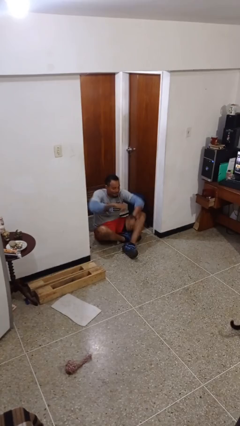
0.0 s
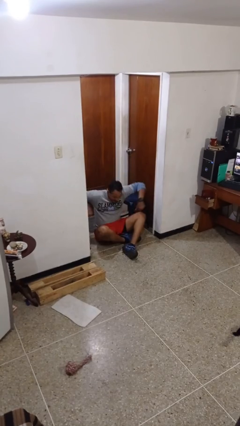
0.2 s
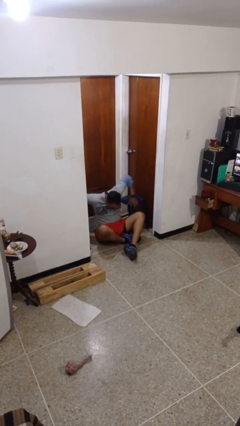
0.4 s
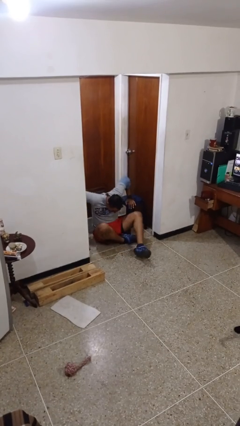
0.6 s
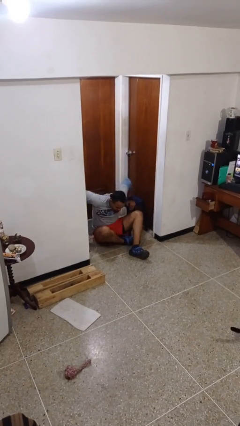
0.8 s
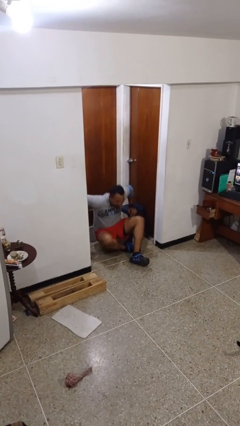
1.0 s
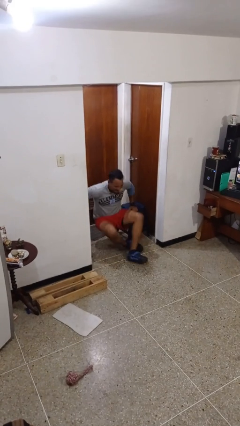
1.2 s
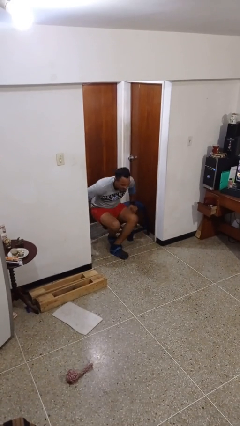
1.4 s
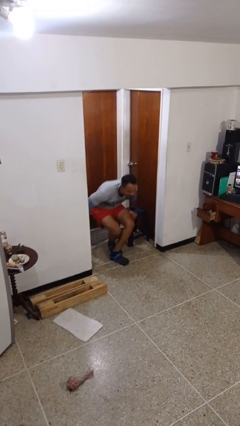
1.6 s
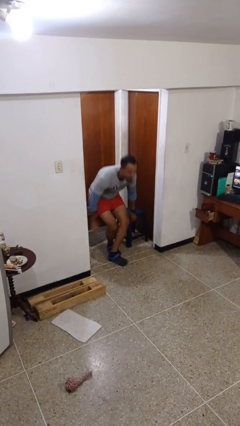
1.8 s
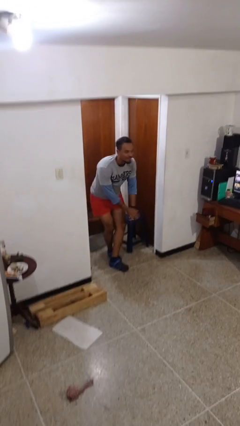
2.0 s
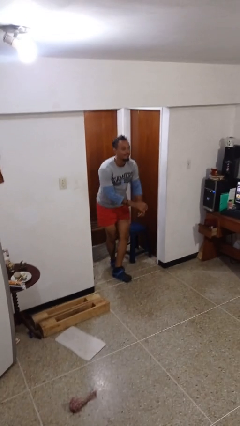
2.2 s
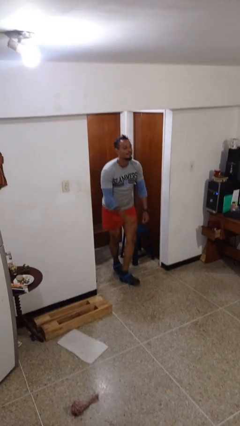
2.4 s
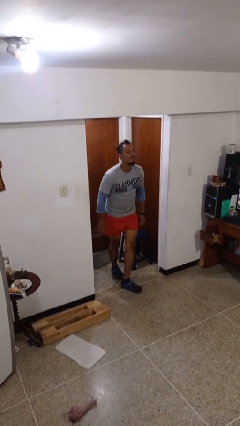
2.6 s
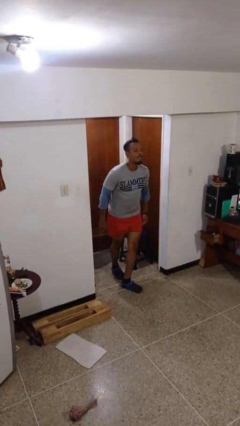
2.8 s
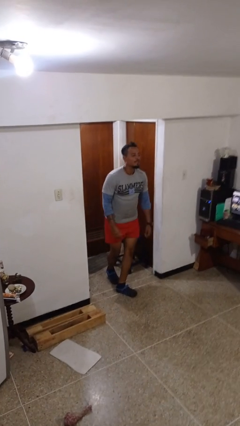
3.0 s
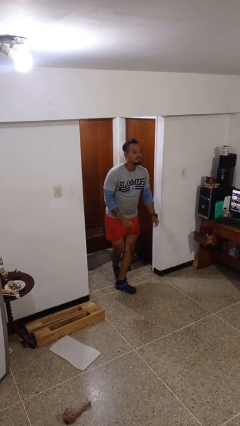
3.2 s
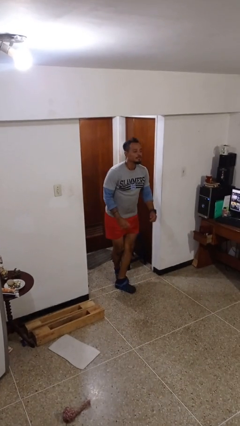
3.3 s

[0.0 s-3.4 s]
person stands up from floor

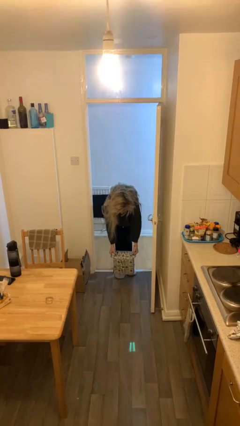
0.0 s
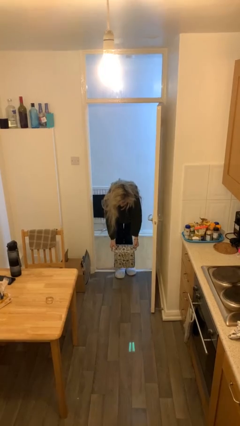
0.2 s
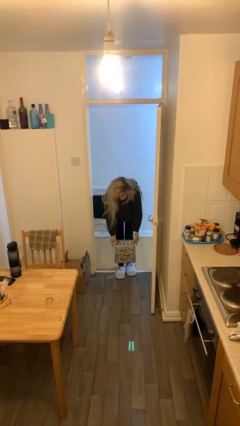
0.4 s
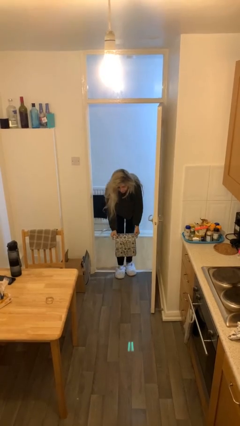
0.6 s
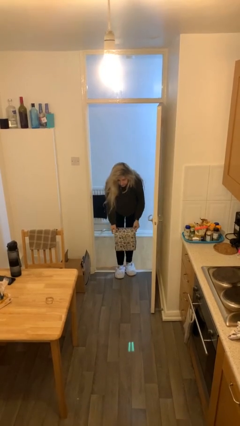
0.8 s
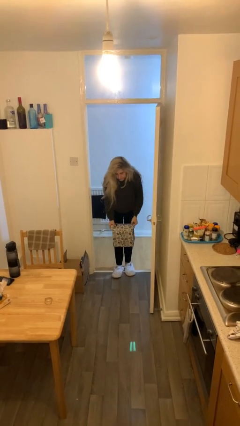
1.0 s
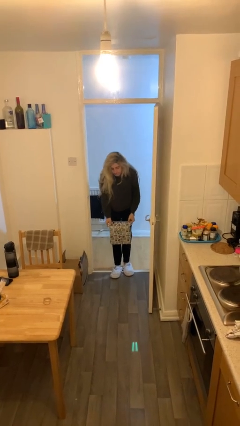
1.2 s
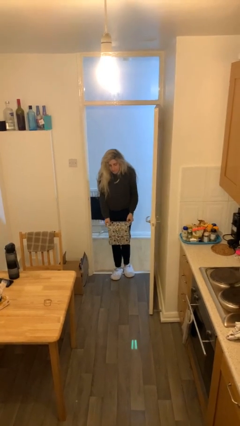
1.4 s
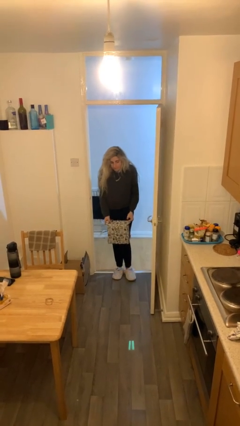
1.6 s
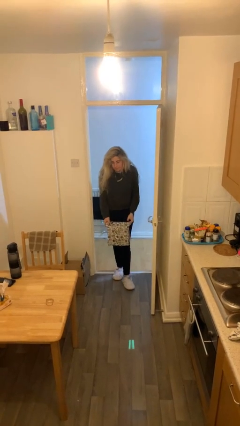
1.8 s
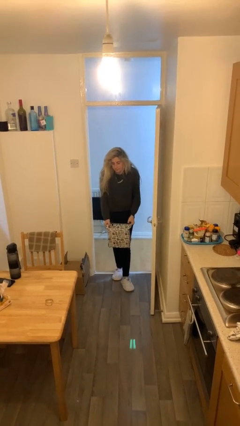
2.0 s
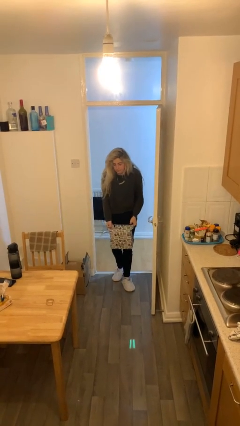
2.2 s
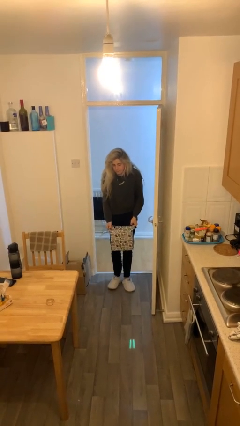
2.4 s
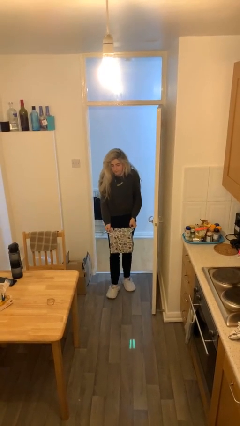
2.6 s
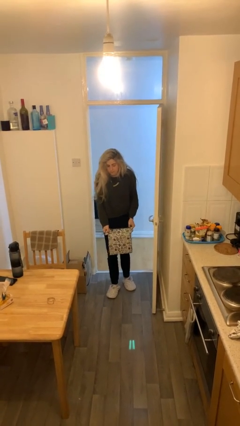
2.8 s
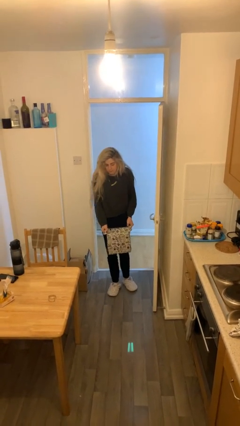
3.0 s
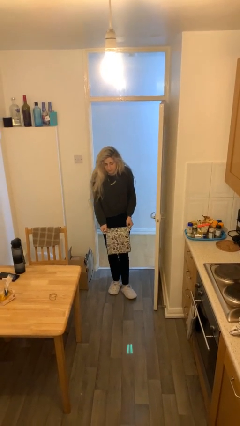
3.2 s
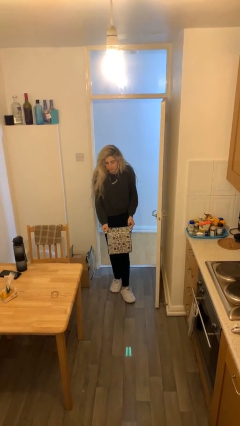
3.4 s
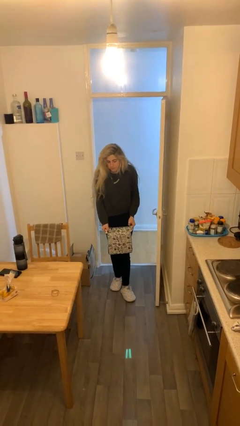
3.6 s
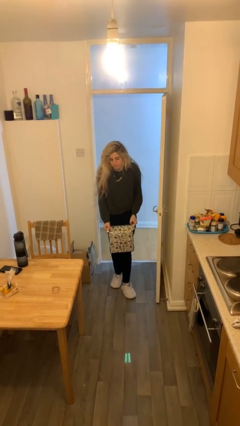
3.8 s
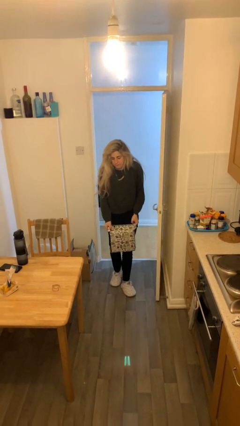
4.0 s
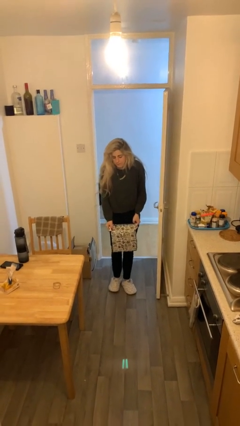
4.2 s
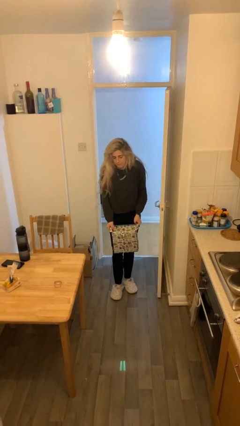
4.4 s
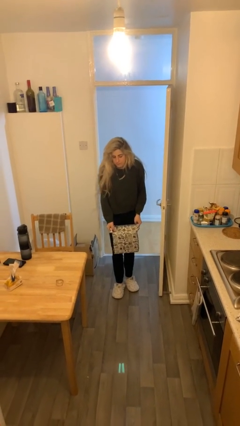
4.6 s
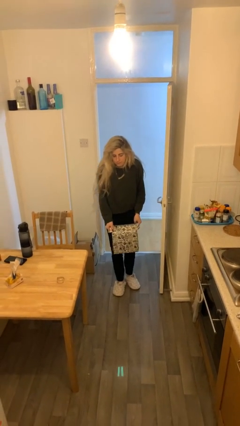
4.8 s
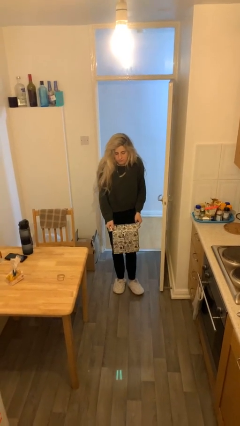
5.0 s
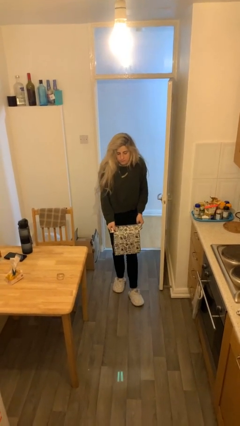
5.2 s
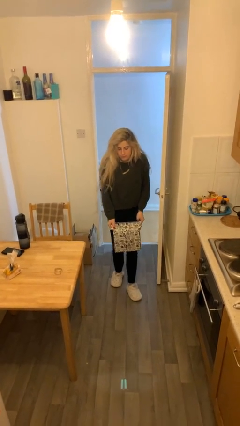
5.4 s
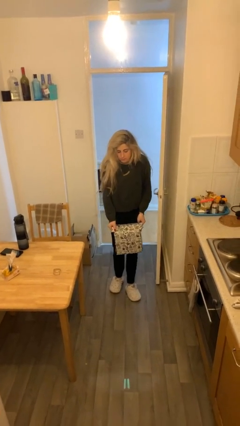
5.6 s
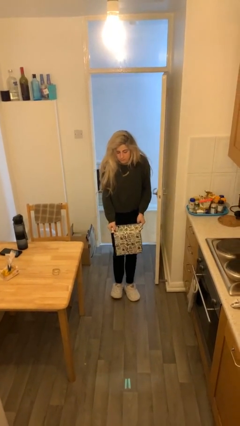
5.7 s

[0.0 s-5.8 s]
person carries heavy object

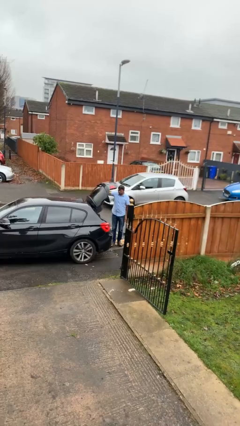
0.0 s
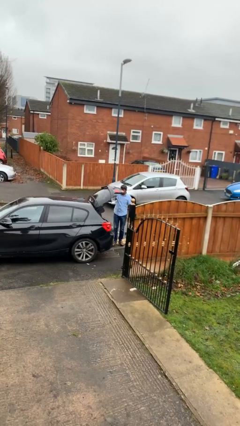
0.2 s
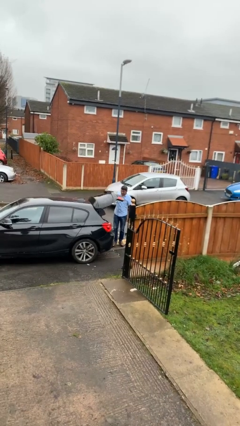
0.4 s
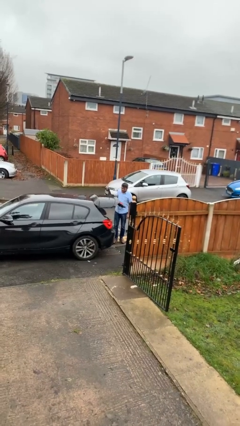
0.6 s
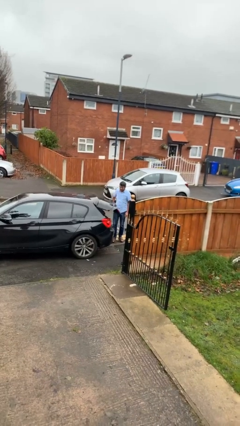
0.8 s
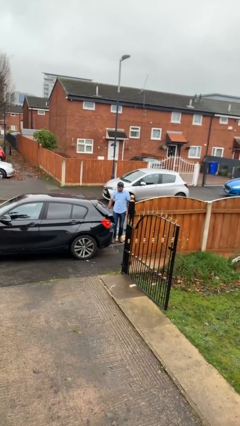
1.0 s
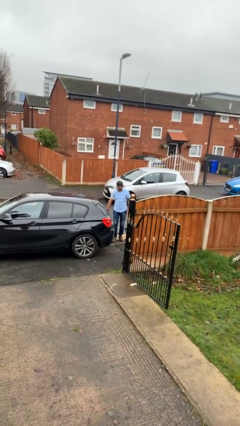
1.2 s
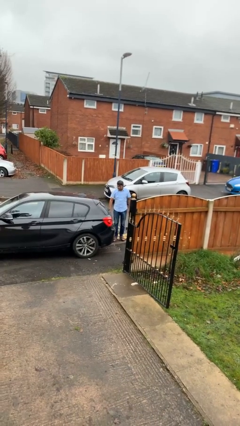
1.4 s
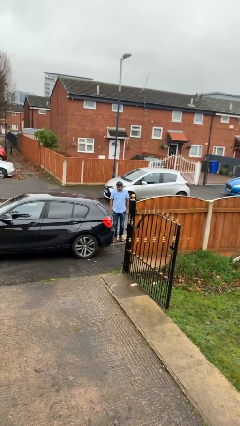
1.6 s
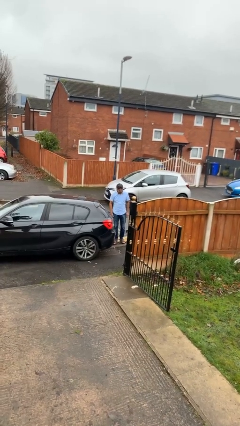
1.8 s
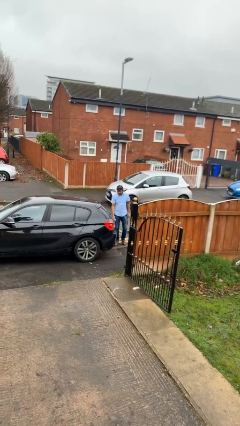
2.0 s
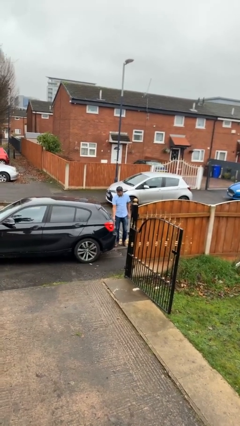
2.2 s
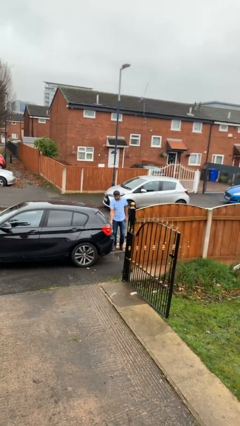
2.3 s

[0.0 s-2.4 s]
person closes car trunk

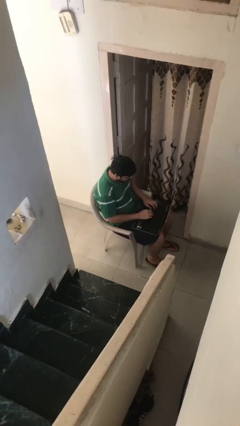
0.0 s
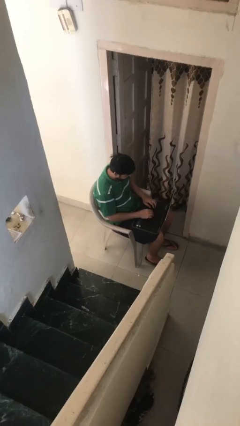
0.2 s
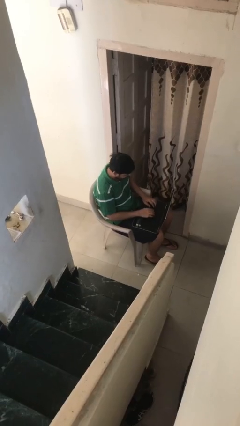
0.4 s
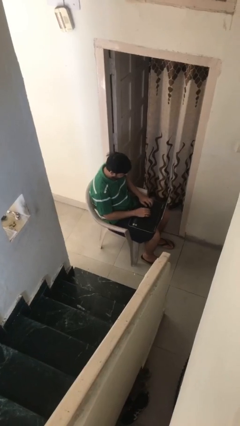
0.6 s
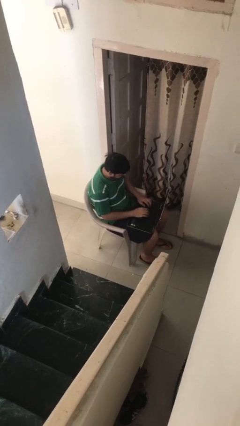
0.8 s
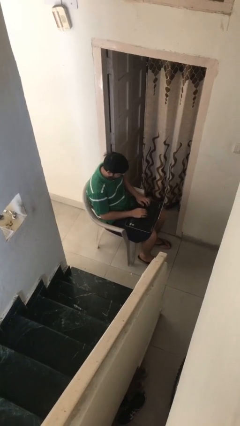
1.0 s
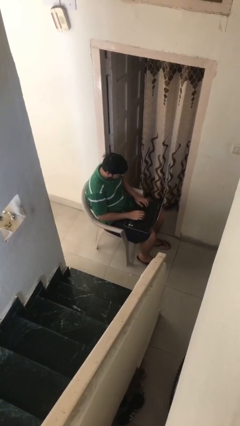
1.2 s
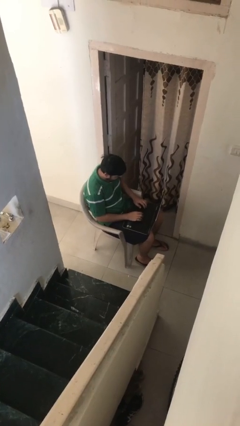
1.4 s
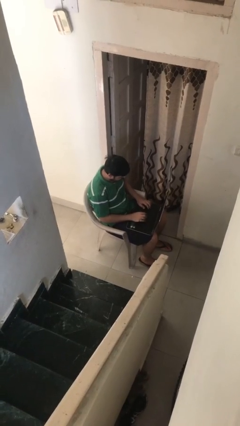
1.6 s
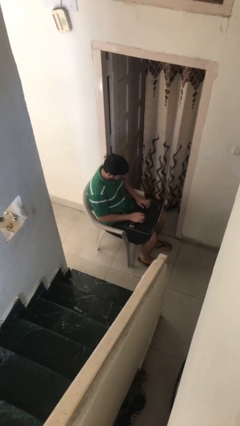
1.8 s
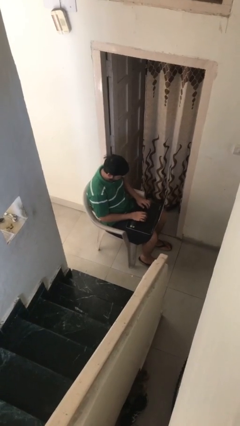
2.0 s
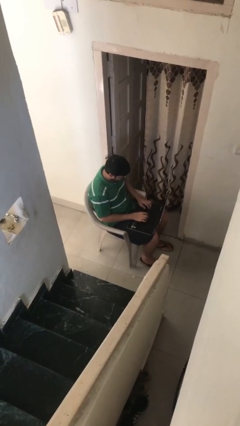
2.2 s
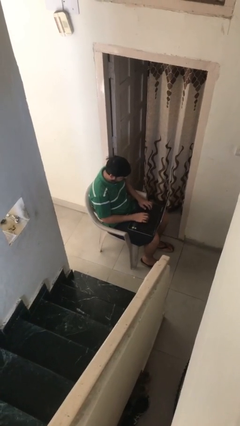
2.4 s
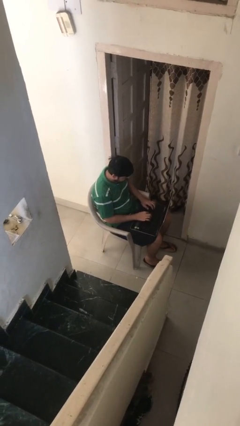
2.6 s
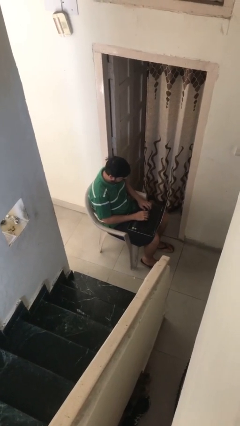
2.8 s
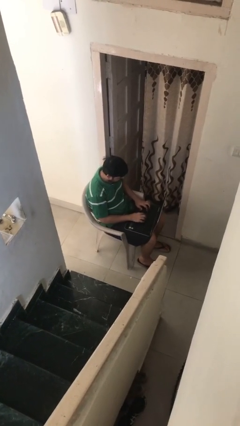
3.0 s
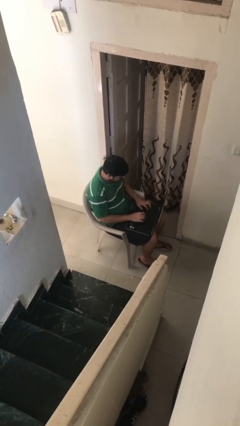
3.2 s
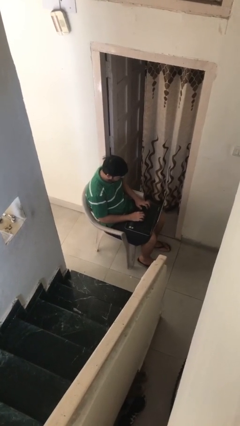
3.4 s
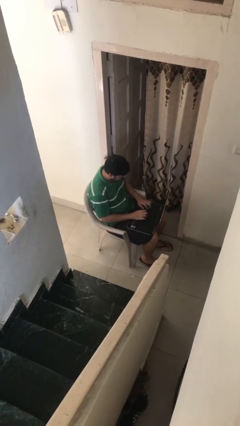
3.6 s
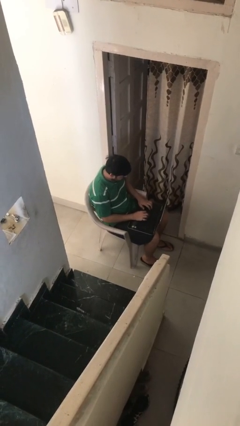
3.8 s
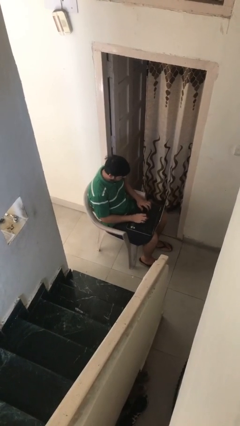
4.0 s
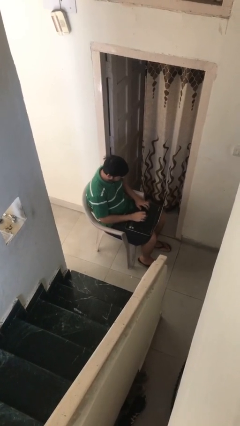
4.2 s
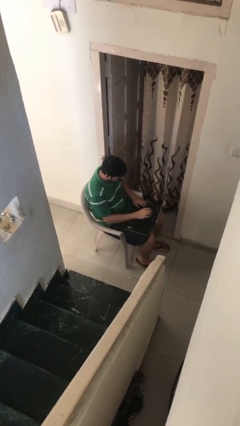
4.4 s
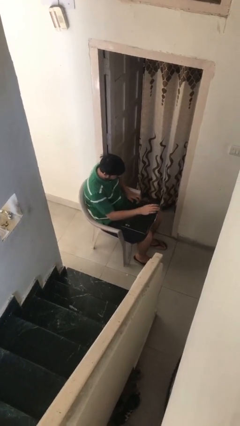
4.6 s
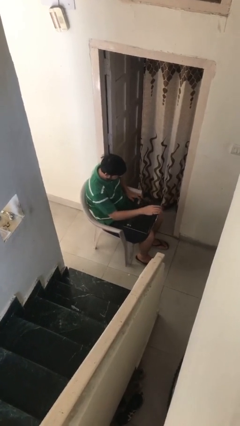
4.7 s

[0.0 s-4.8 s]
person interacts with laptop

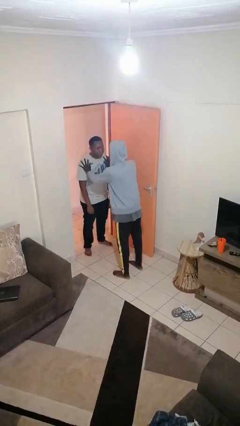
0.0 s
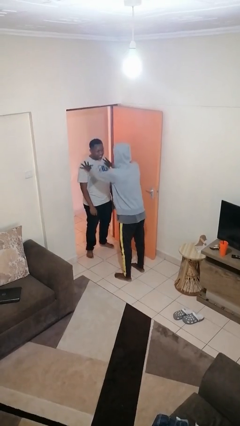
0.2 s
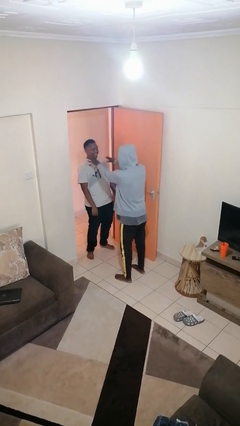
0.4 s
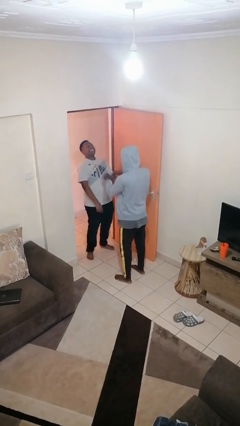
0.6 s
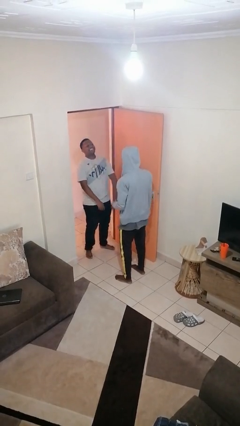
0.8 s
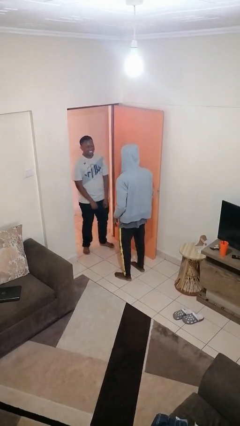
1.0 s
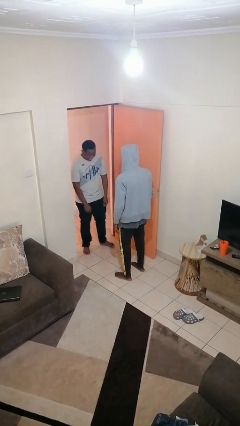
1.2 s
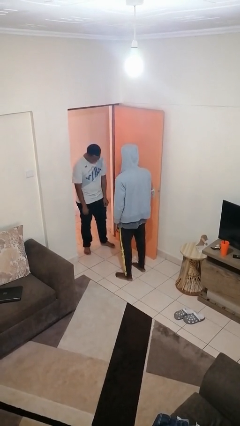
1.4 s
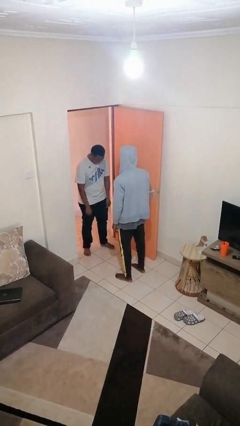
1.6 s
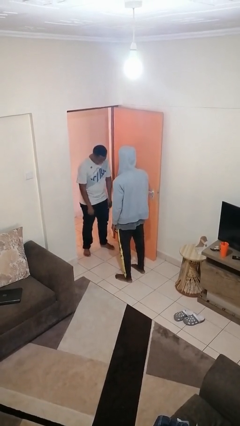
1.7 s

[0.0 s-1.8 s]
person shoves person
